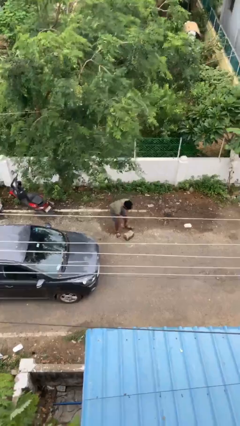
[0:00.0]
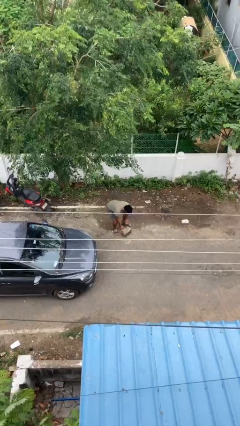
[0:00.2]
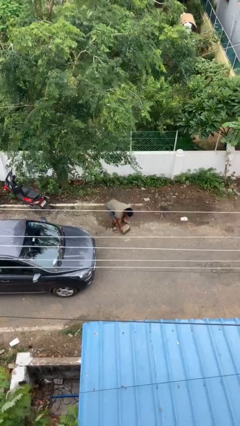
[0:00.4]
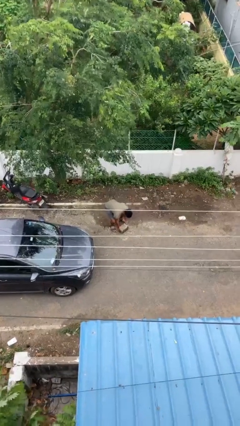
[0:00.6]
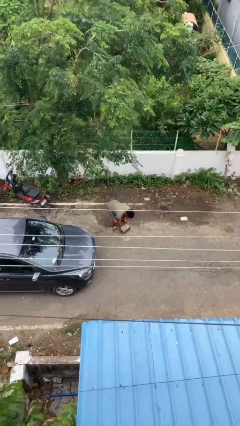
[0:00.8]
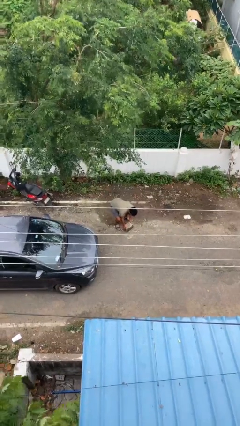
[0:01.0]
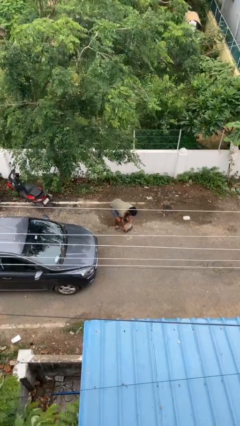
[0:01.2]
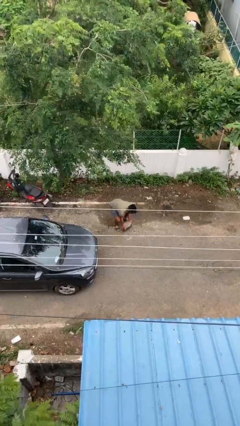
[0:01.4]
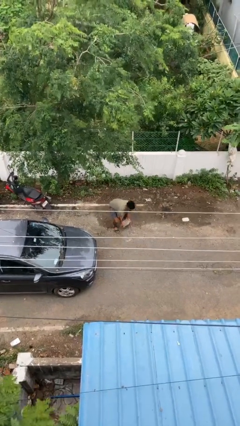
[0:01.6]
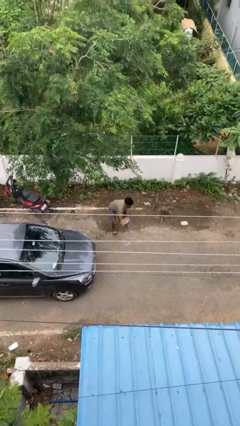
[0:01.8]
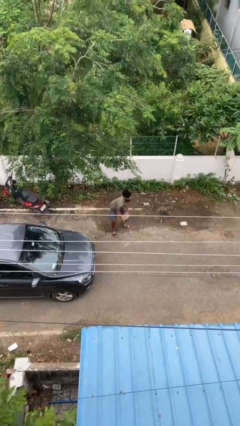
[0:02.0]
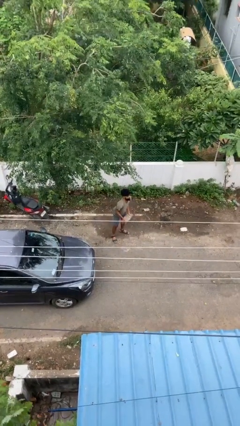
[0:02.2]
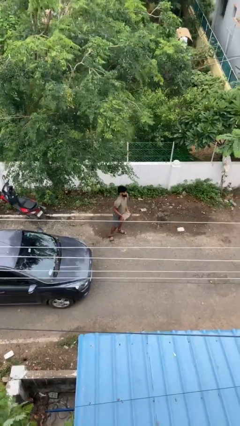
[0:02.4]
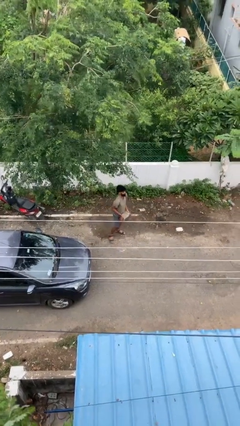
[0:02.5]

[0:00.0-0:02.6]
person picks up object from floor

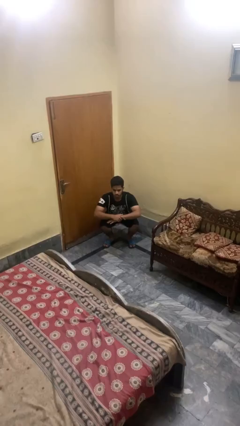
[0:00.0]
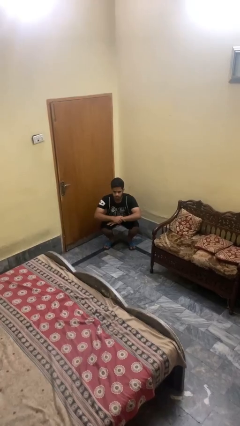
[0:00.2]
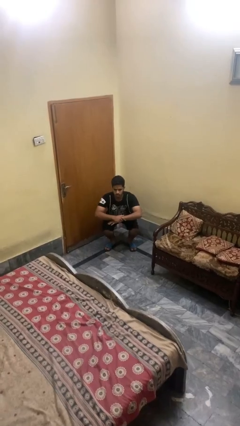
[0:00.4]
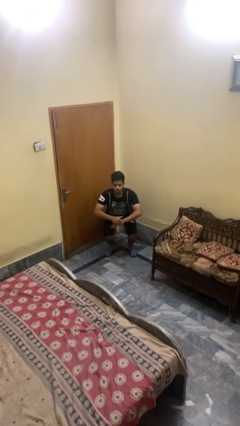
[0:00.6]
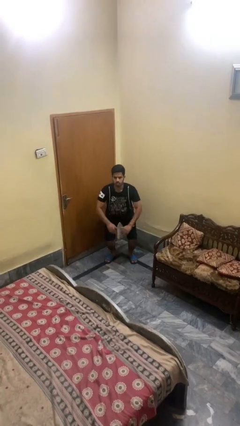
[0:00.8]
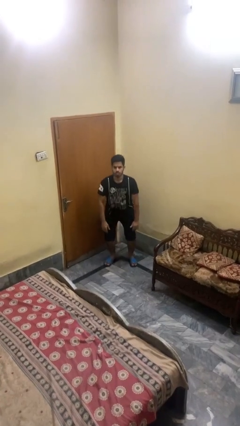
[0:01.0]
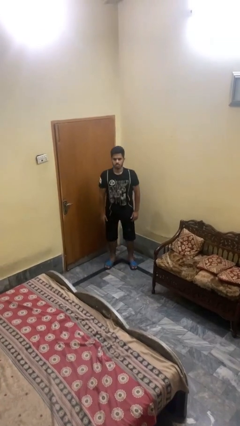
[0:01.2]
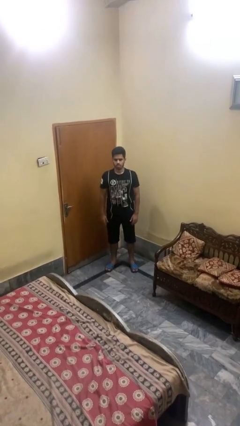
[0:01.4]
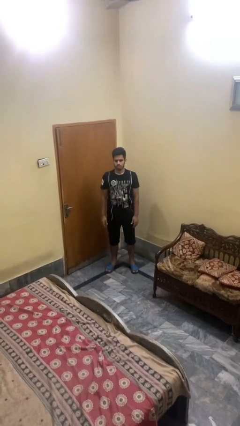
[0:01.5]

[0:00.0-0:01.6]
person stands up

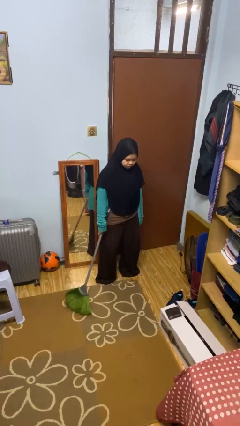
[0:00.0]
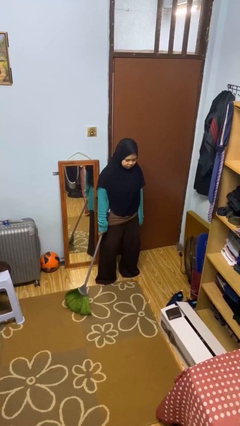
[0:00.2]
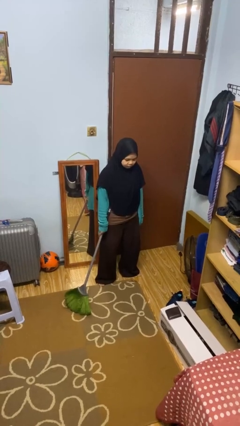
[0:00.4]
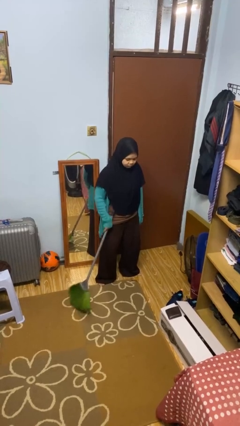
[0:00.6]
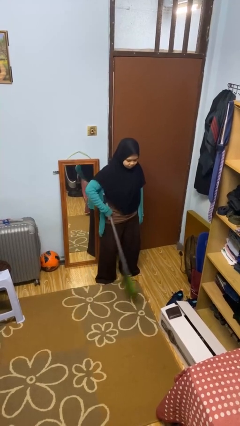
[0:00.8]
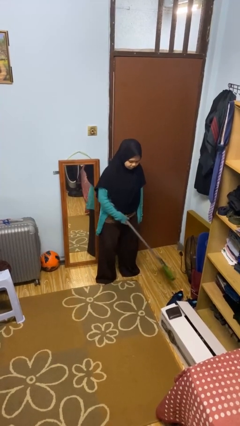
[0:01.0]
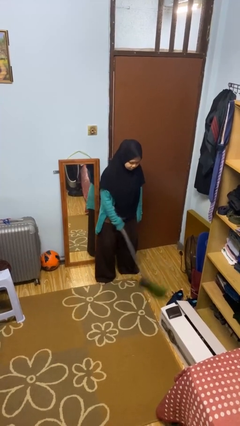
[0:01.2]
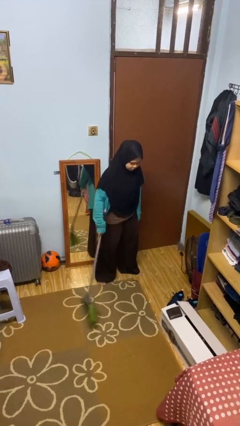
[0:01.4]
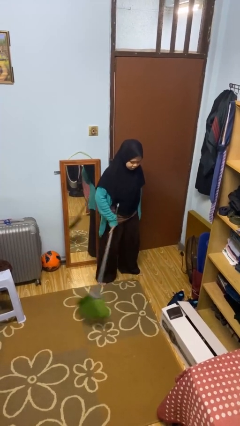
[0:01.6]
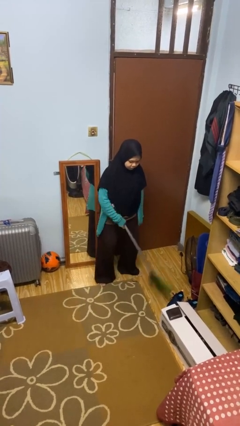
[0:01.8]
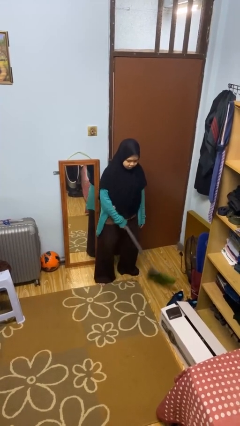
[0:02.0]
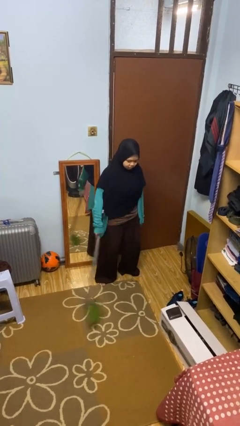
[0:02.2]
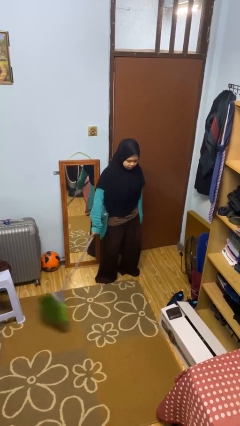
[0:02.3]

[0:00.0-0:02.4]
person sweeps floor

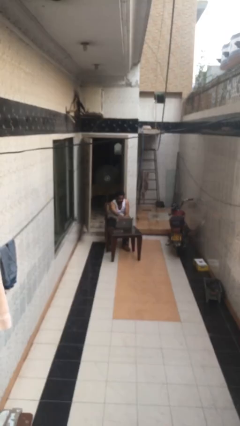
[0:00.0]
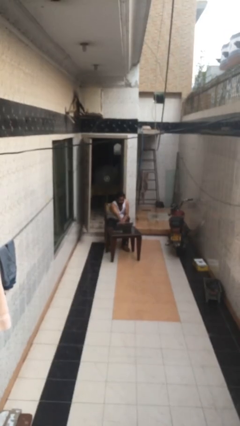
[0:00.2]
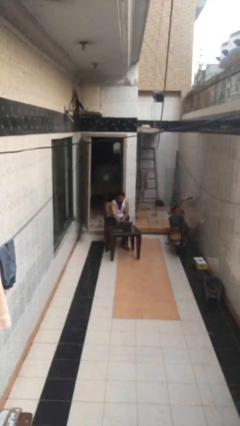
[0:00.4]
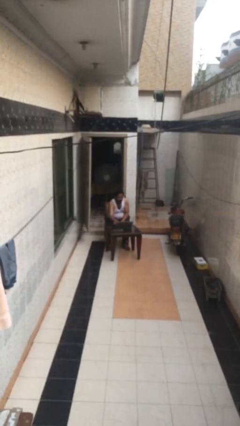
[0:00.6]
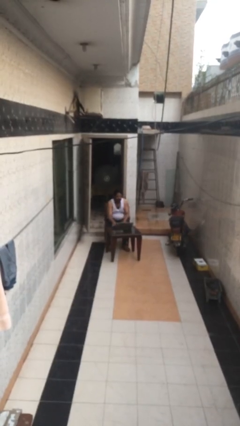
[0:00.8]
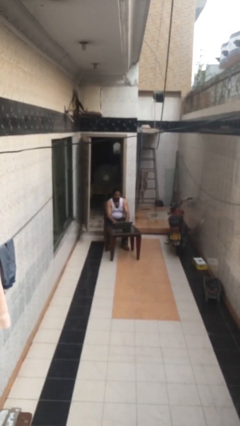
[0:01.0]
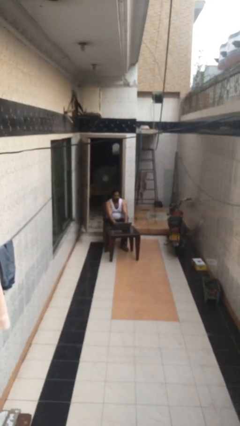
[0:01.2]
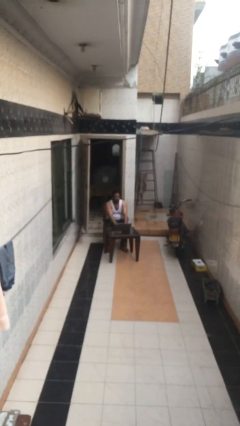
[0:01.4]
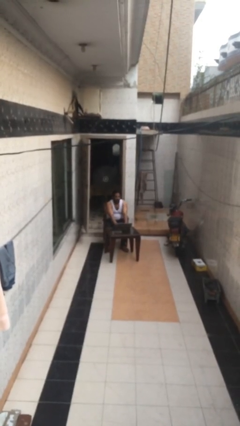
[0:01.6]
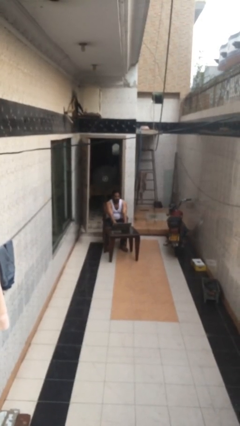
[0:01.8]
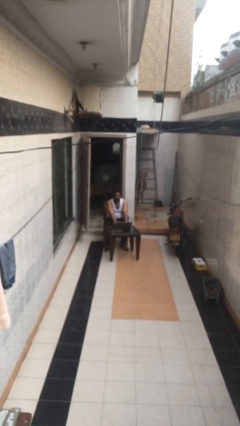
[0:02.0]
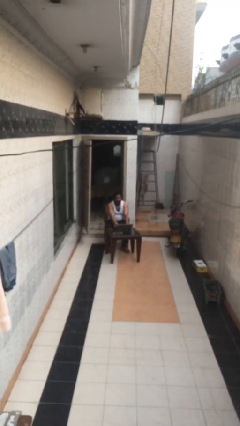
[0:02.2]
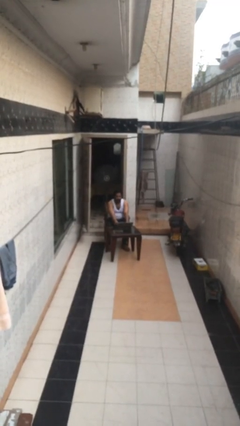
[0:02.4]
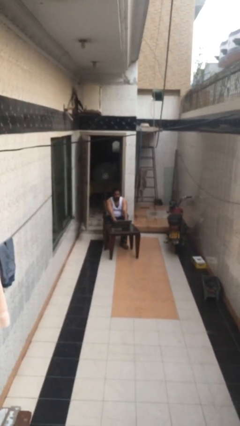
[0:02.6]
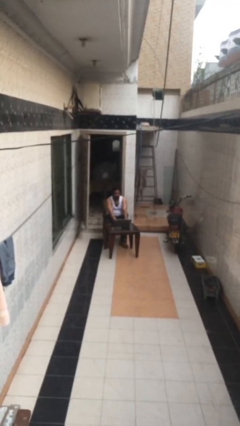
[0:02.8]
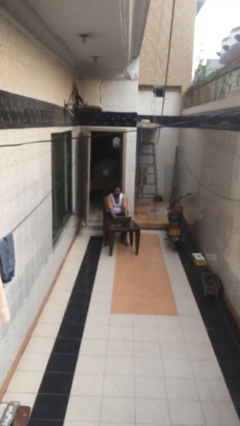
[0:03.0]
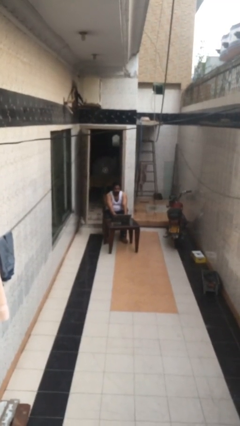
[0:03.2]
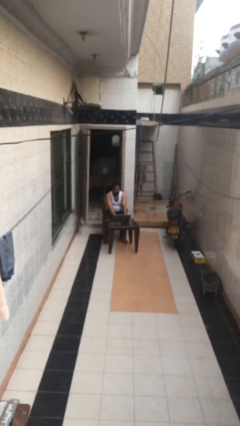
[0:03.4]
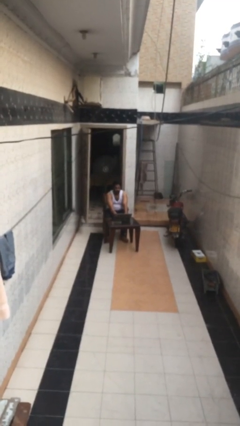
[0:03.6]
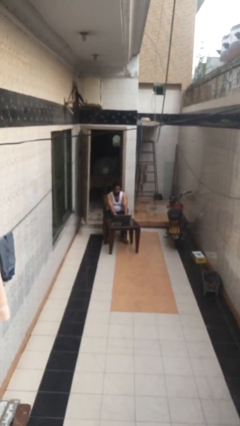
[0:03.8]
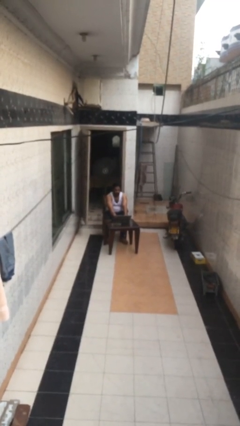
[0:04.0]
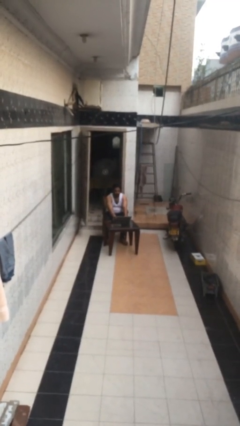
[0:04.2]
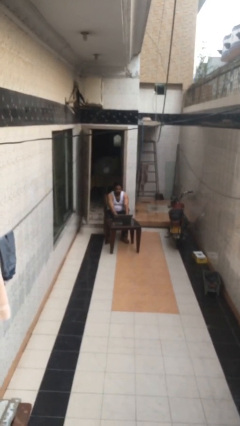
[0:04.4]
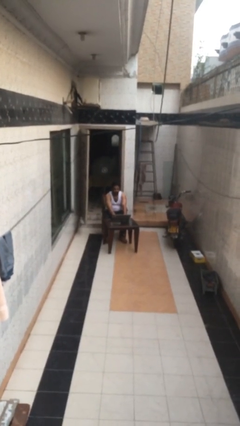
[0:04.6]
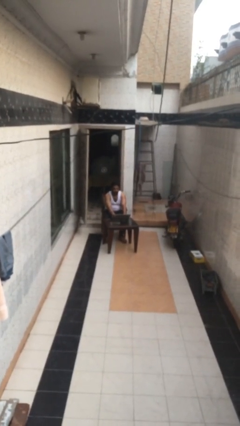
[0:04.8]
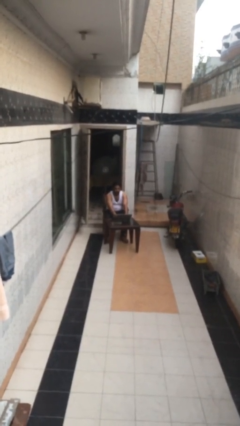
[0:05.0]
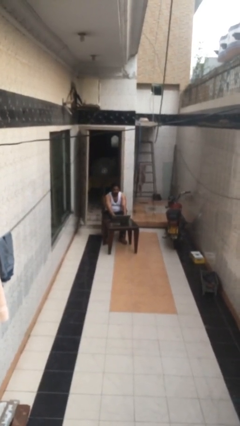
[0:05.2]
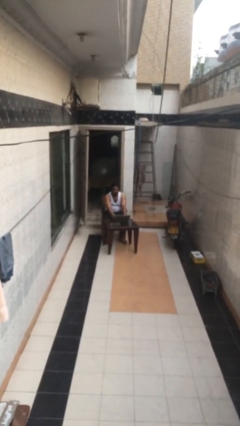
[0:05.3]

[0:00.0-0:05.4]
person interacts with laptop

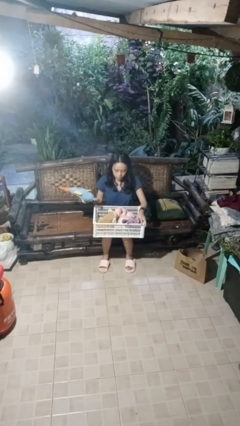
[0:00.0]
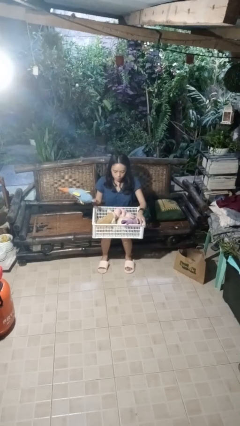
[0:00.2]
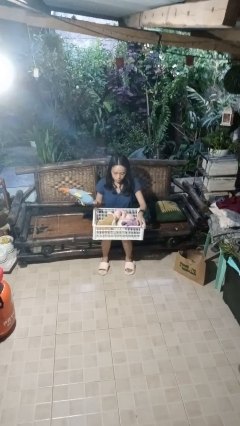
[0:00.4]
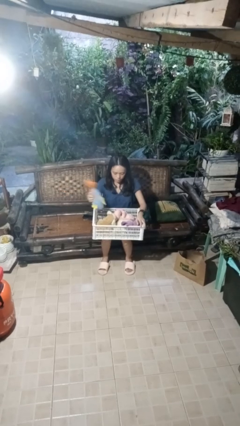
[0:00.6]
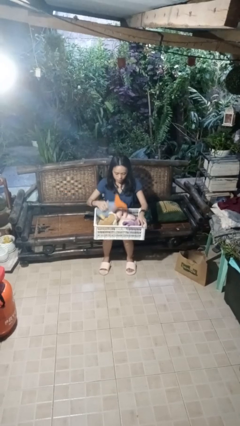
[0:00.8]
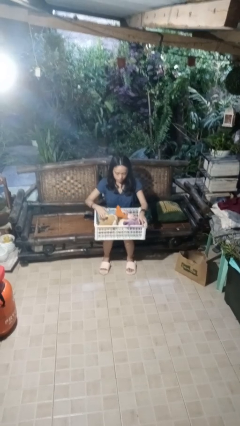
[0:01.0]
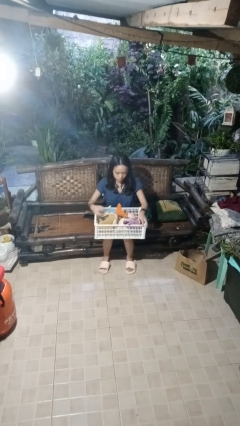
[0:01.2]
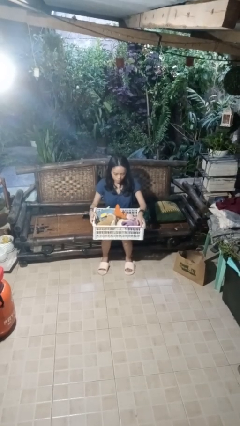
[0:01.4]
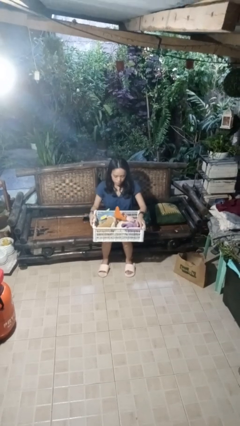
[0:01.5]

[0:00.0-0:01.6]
person puts object into basket

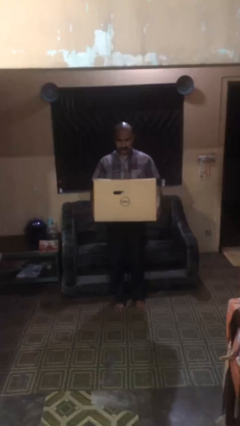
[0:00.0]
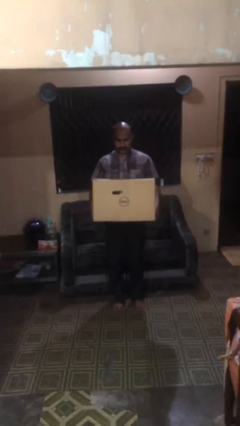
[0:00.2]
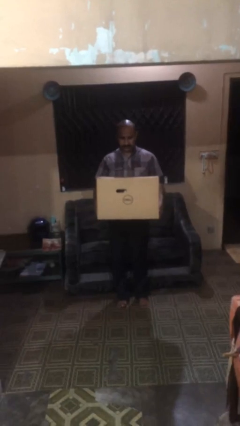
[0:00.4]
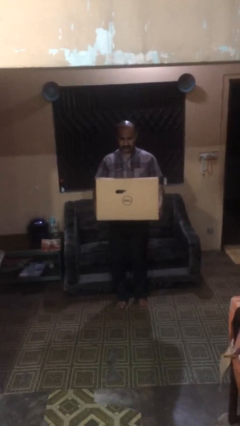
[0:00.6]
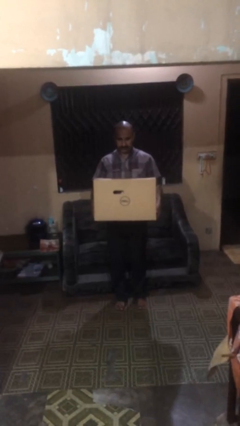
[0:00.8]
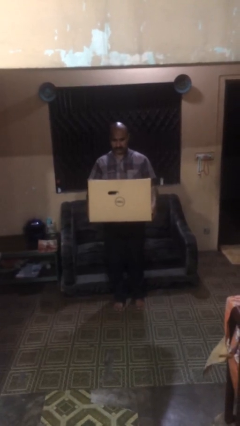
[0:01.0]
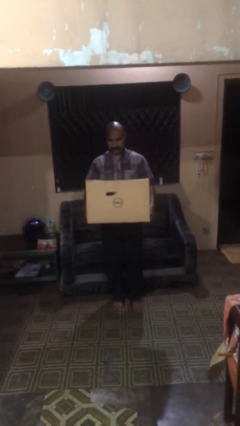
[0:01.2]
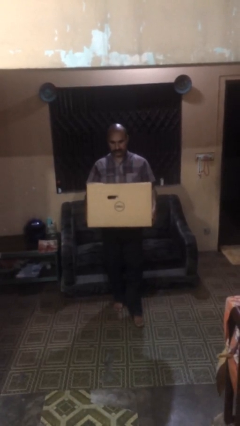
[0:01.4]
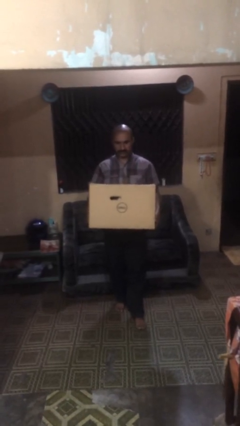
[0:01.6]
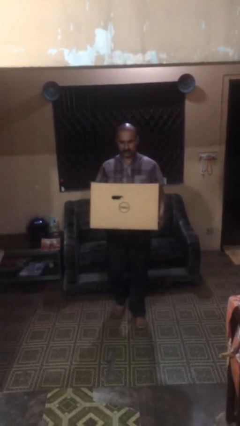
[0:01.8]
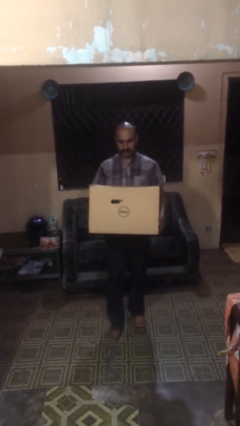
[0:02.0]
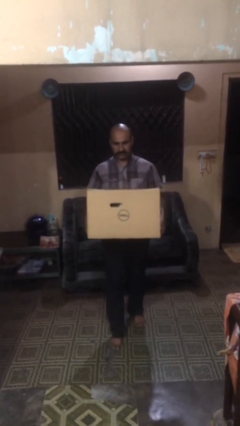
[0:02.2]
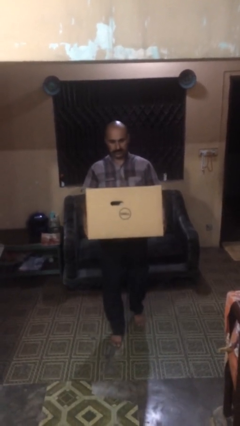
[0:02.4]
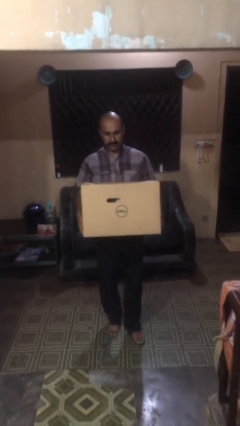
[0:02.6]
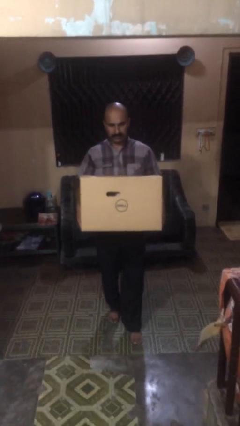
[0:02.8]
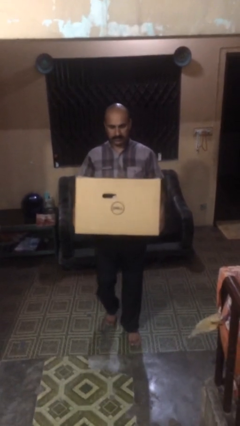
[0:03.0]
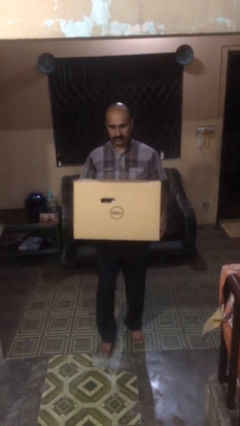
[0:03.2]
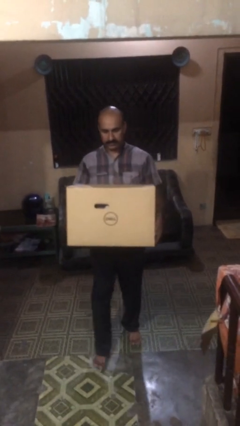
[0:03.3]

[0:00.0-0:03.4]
person carries heavy object

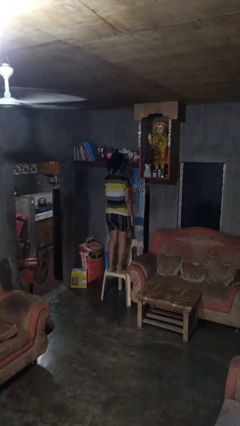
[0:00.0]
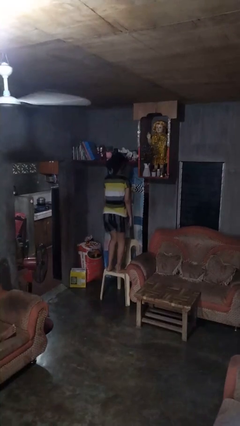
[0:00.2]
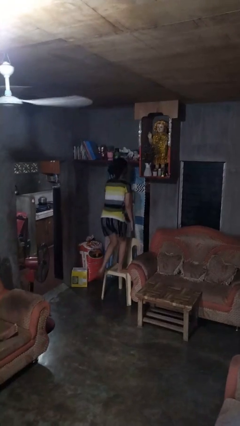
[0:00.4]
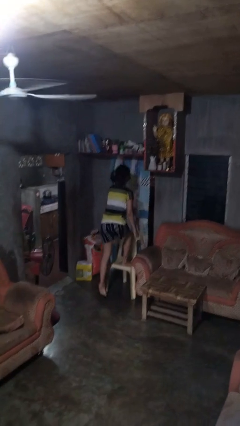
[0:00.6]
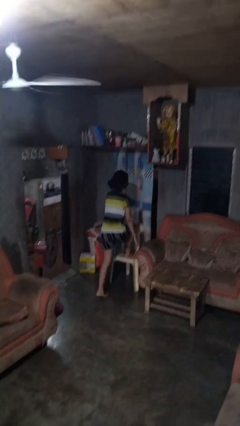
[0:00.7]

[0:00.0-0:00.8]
person climbs off chair
